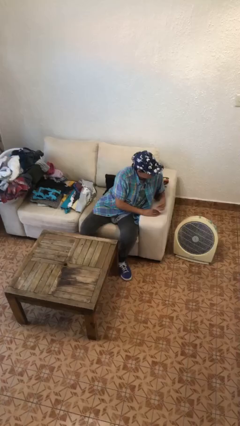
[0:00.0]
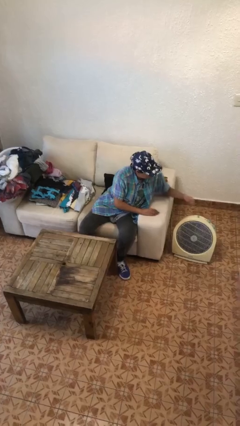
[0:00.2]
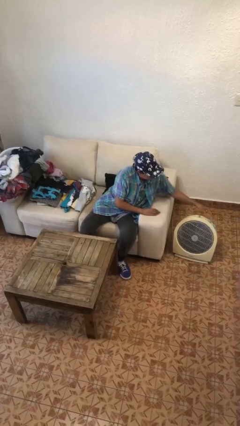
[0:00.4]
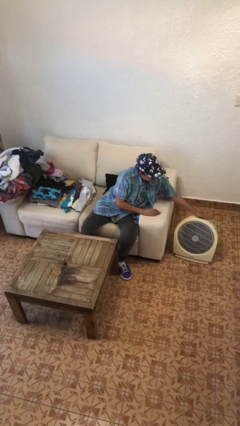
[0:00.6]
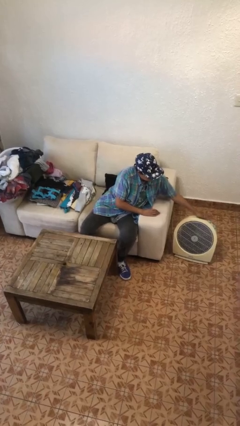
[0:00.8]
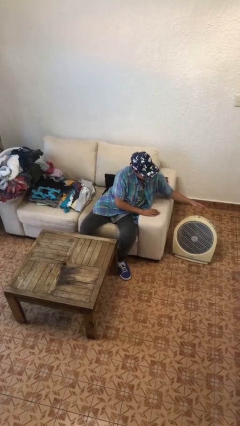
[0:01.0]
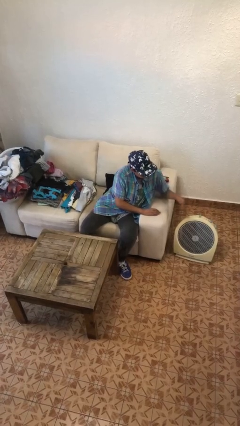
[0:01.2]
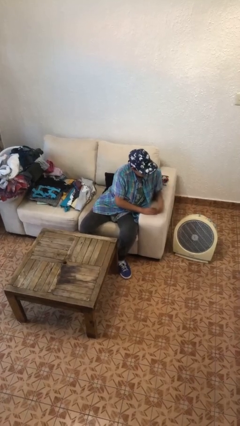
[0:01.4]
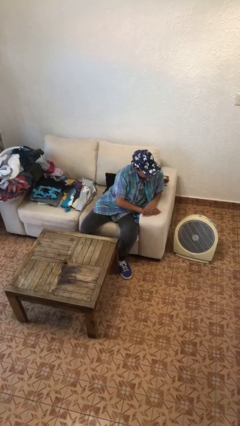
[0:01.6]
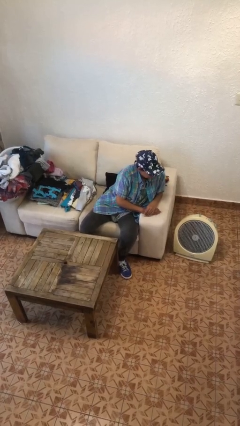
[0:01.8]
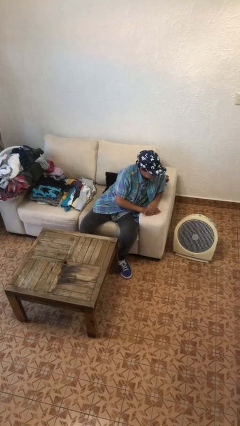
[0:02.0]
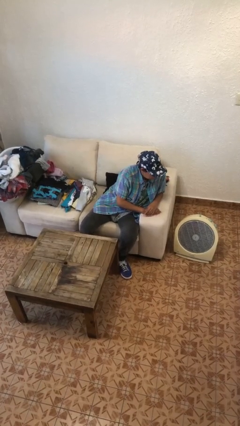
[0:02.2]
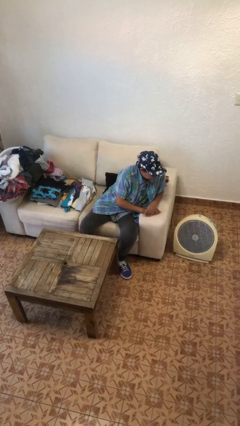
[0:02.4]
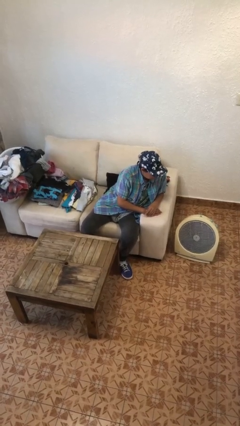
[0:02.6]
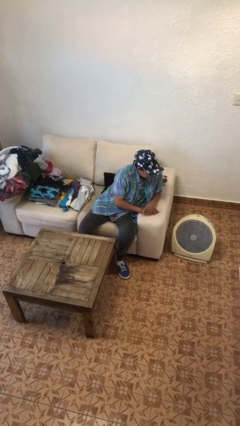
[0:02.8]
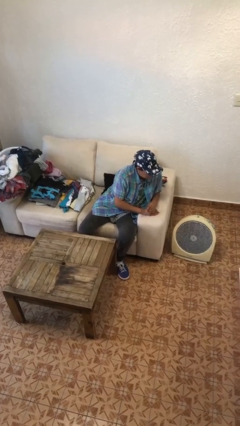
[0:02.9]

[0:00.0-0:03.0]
person turns on fan

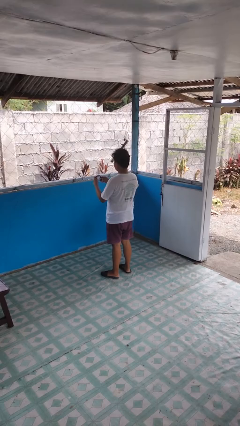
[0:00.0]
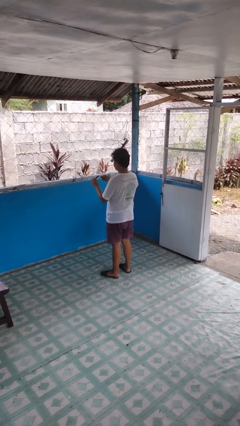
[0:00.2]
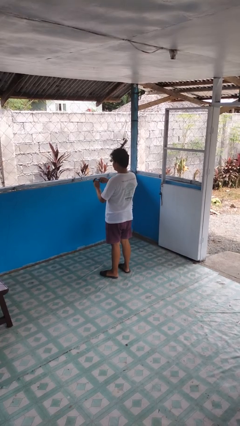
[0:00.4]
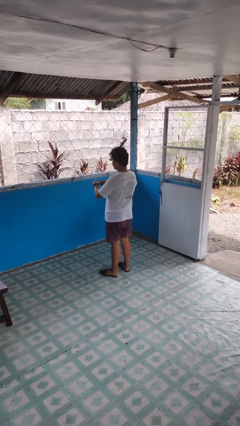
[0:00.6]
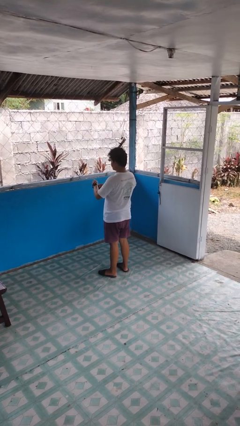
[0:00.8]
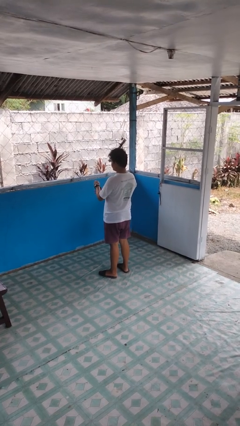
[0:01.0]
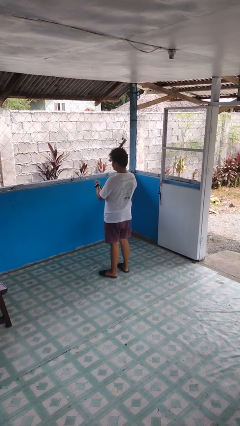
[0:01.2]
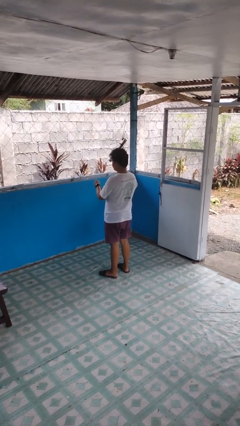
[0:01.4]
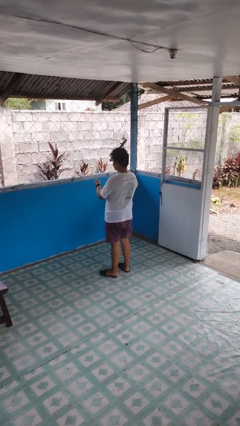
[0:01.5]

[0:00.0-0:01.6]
person puts on wristwatch

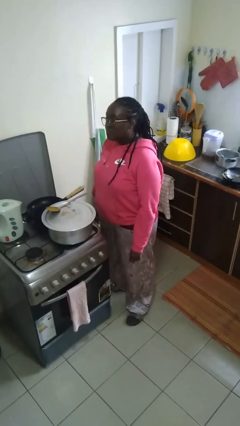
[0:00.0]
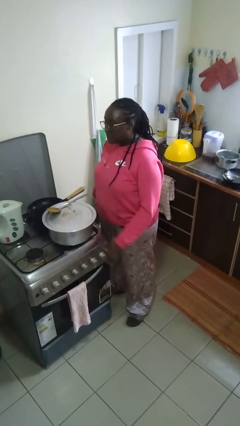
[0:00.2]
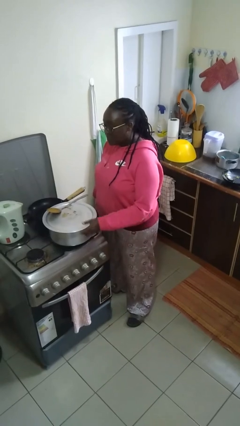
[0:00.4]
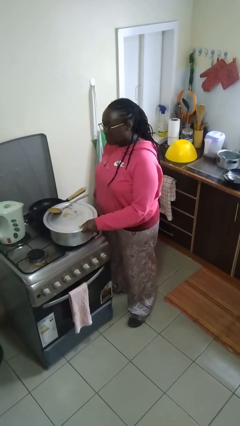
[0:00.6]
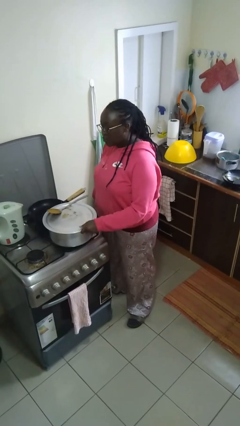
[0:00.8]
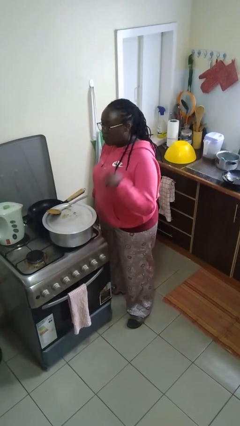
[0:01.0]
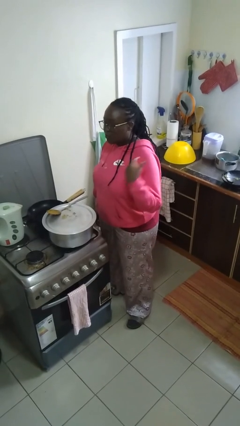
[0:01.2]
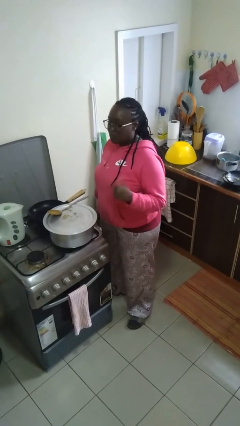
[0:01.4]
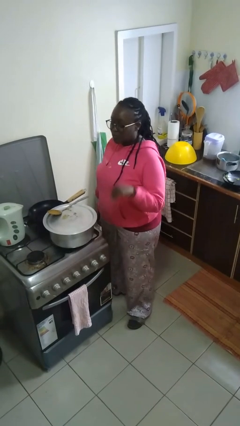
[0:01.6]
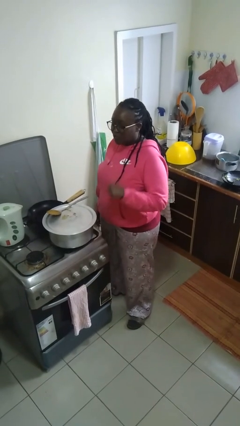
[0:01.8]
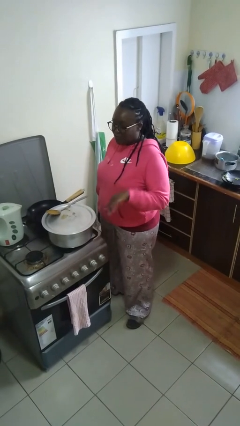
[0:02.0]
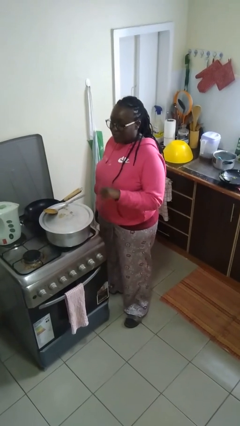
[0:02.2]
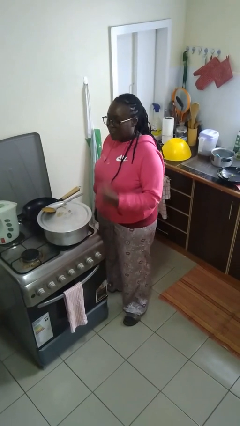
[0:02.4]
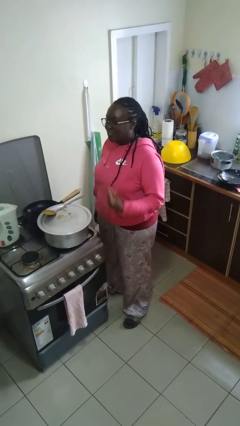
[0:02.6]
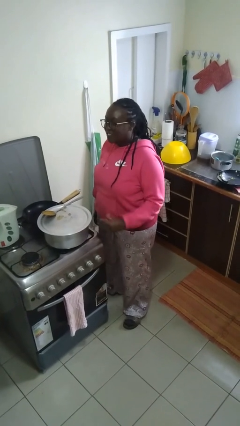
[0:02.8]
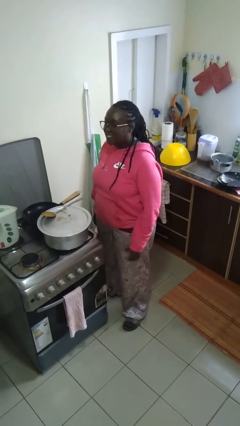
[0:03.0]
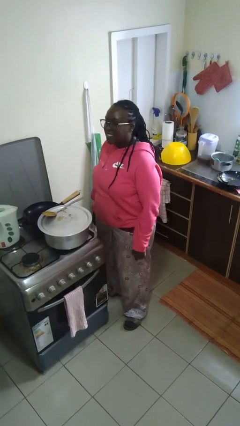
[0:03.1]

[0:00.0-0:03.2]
person burns hand

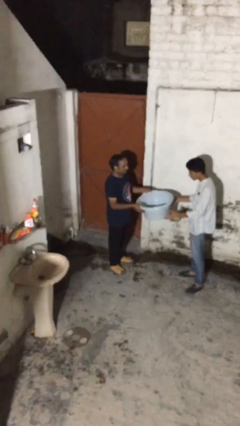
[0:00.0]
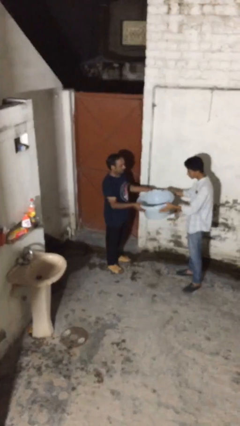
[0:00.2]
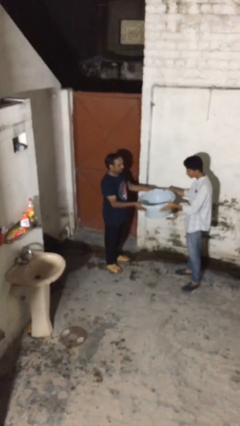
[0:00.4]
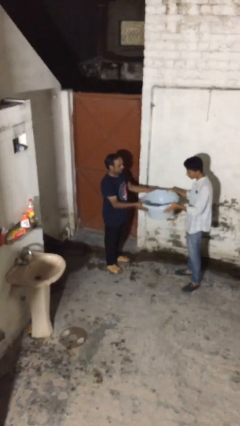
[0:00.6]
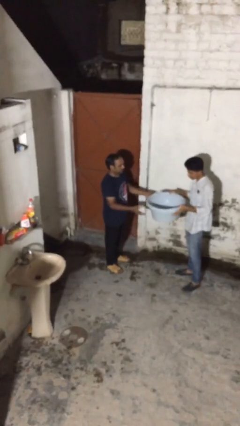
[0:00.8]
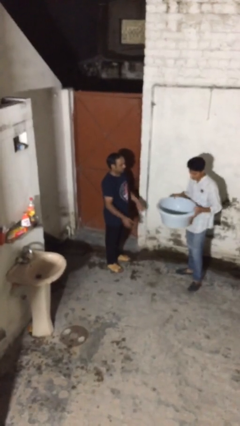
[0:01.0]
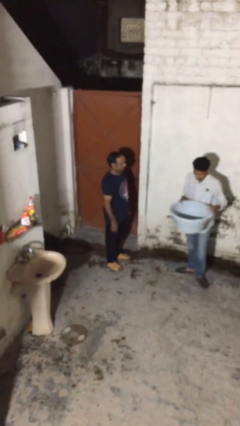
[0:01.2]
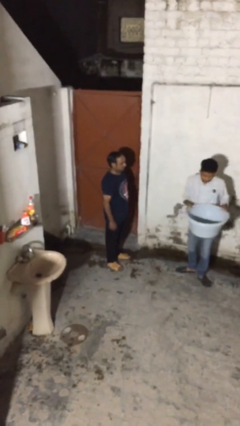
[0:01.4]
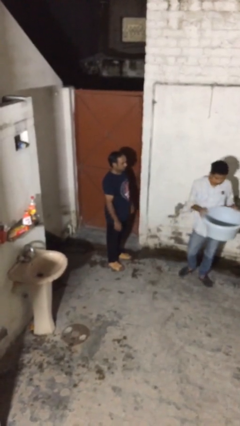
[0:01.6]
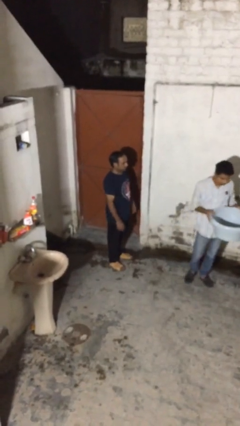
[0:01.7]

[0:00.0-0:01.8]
person transfers object to person

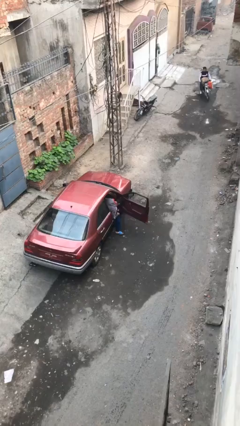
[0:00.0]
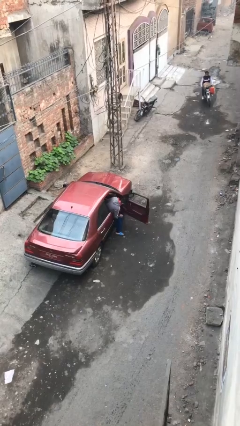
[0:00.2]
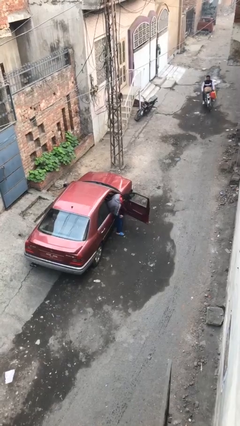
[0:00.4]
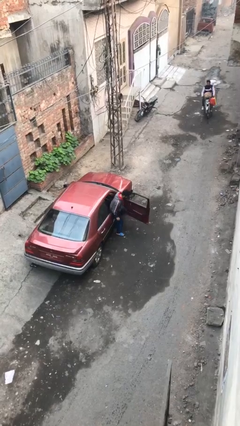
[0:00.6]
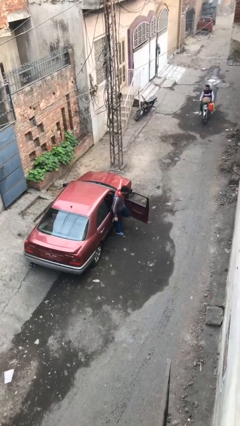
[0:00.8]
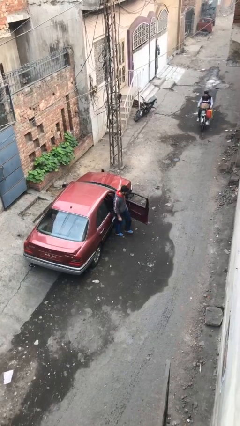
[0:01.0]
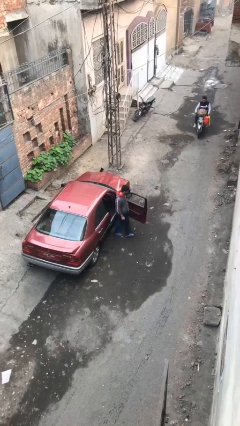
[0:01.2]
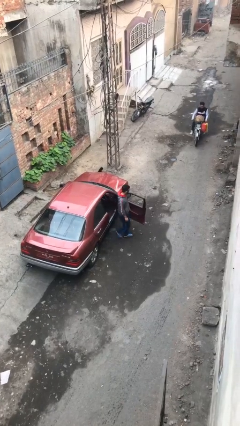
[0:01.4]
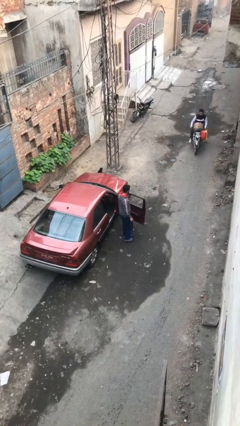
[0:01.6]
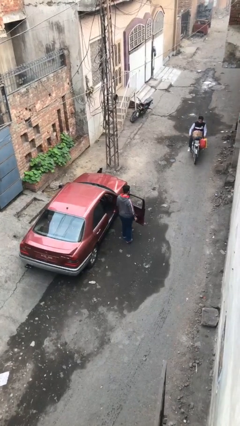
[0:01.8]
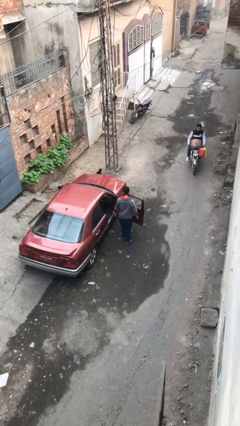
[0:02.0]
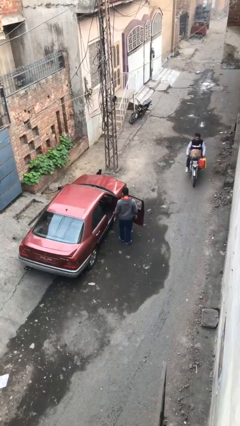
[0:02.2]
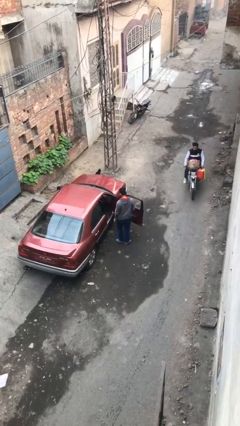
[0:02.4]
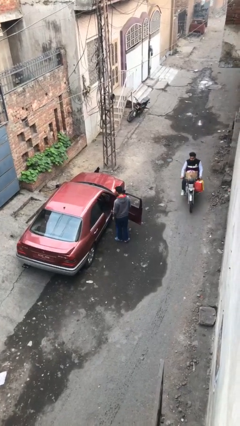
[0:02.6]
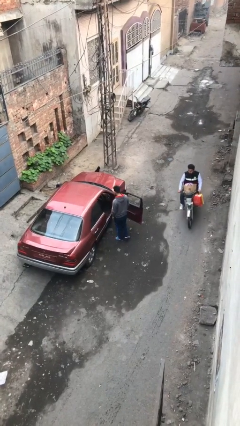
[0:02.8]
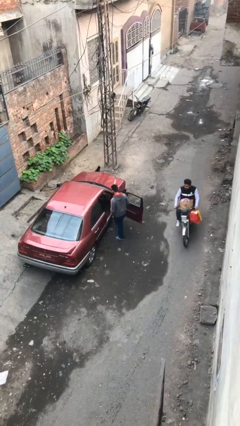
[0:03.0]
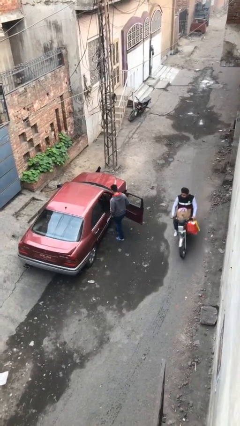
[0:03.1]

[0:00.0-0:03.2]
person exits car

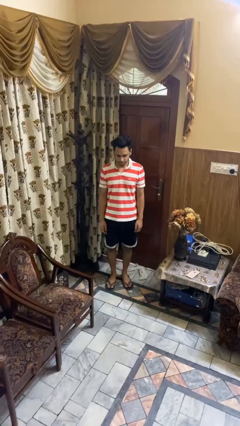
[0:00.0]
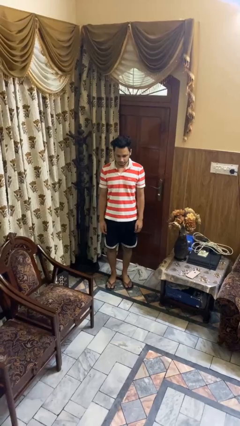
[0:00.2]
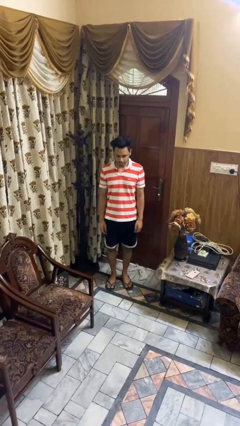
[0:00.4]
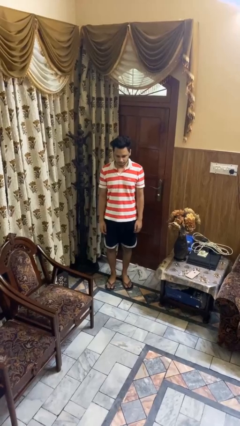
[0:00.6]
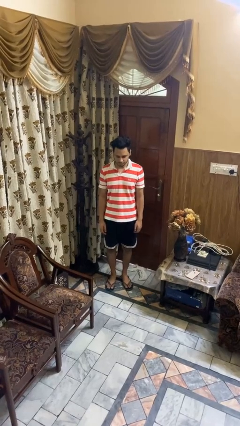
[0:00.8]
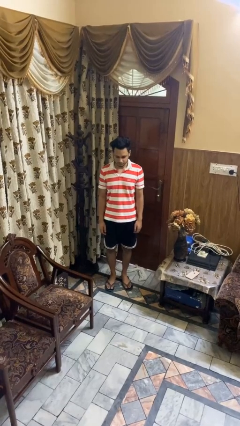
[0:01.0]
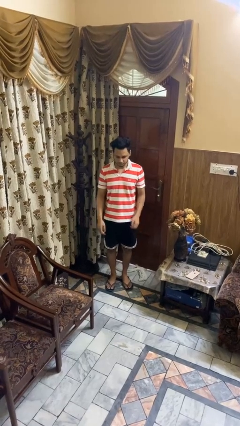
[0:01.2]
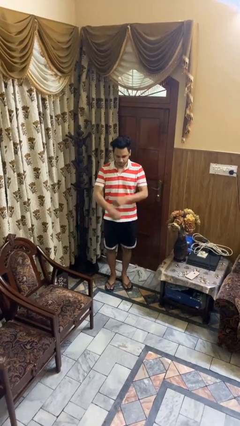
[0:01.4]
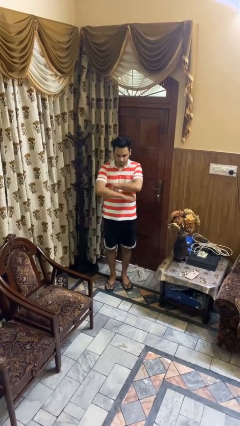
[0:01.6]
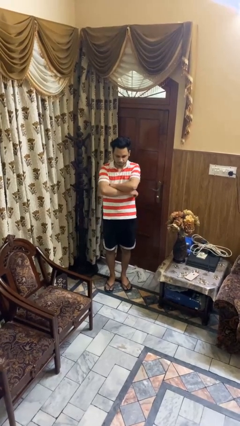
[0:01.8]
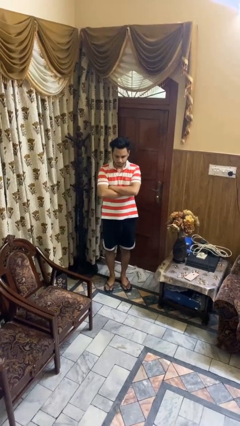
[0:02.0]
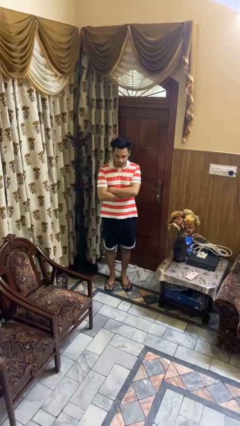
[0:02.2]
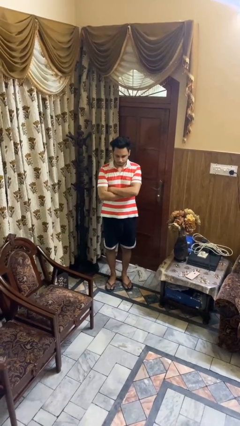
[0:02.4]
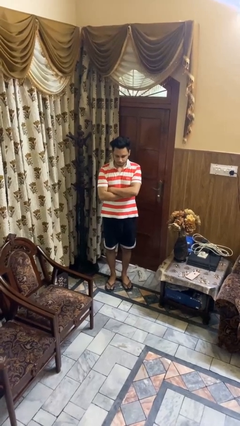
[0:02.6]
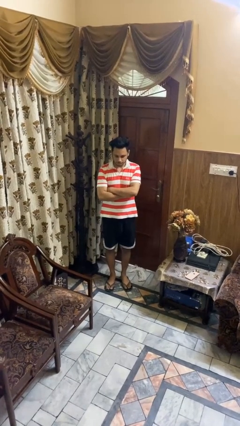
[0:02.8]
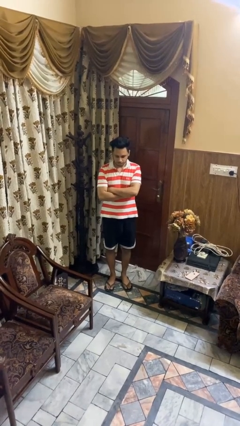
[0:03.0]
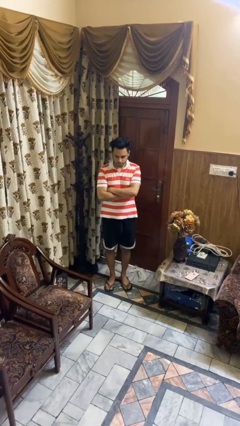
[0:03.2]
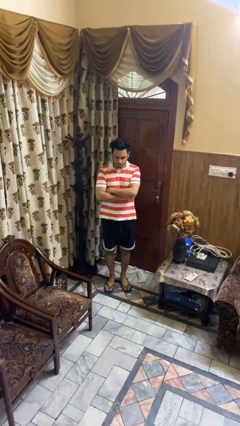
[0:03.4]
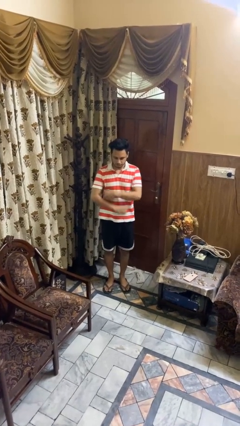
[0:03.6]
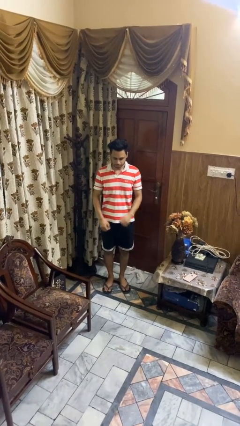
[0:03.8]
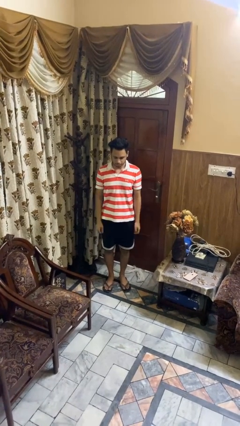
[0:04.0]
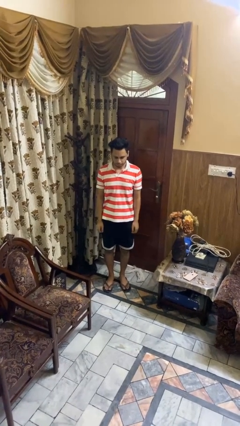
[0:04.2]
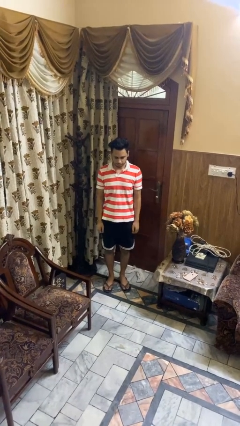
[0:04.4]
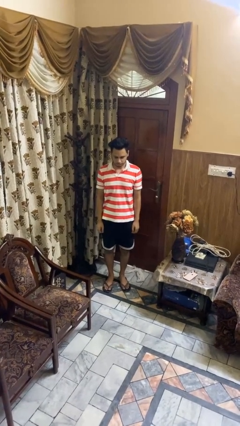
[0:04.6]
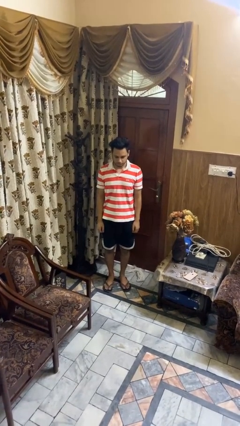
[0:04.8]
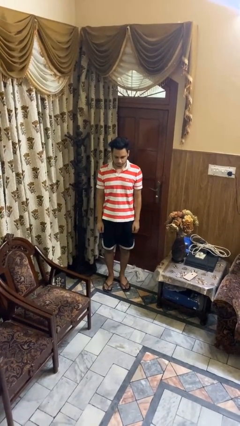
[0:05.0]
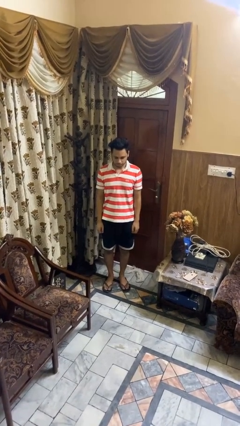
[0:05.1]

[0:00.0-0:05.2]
person crosses arms
